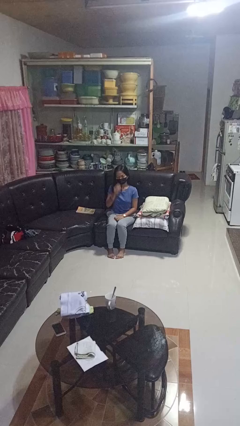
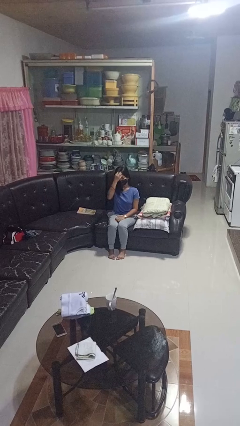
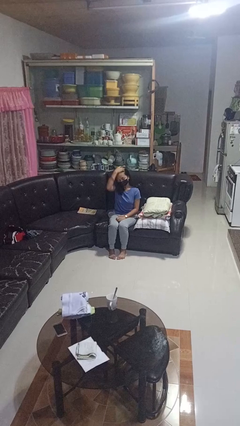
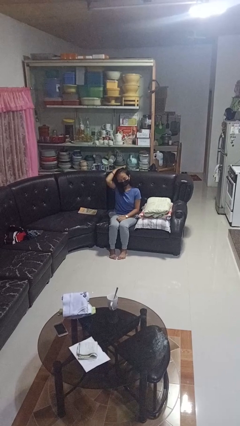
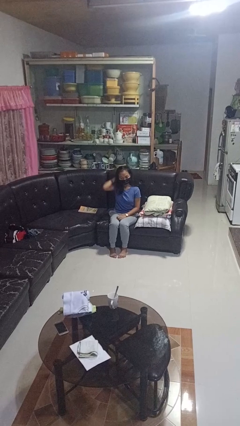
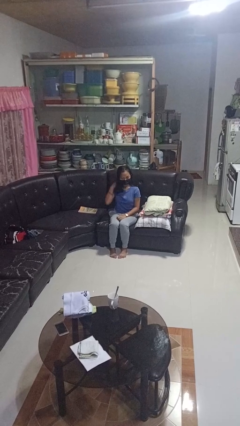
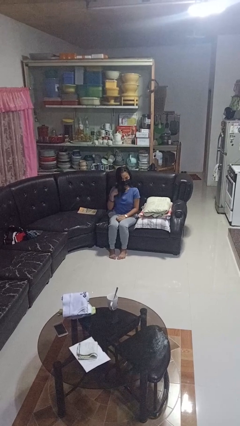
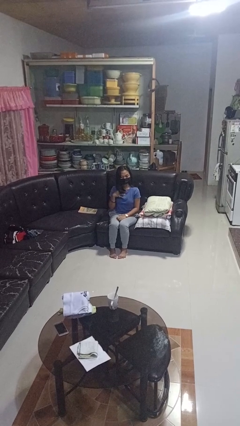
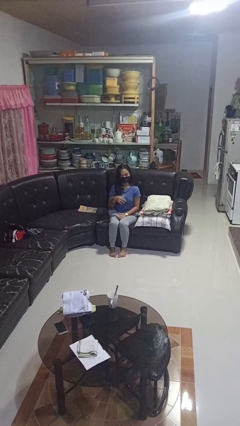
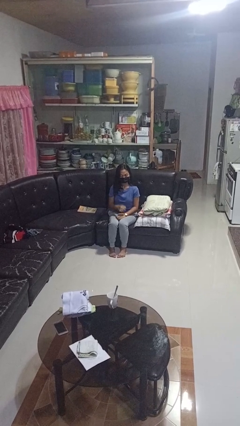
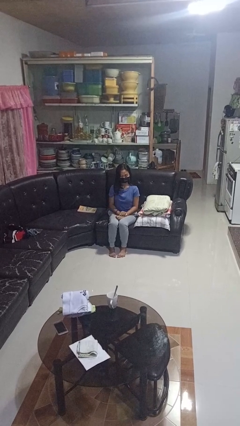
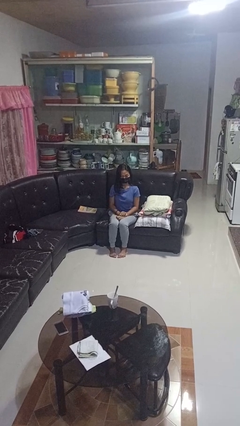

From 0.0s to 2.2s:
person strokes hair

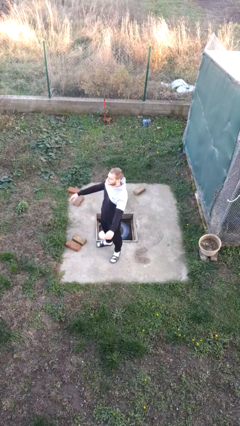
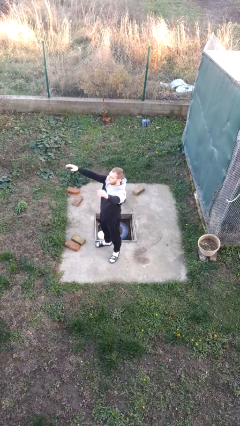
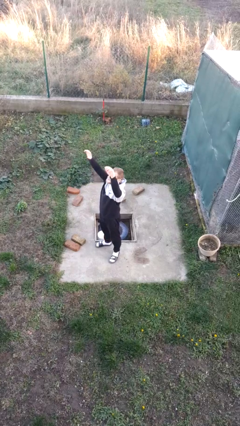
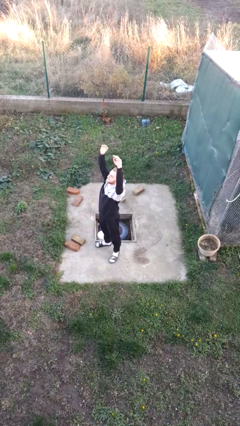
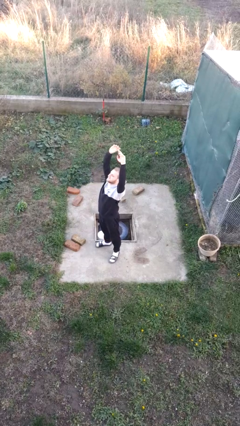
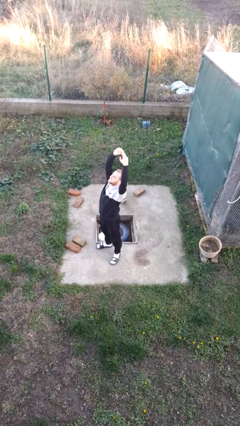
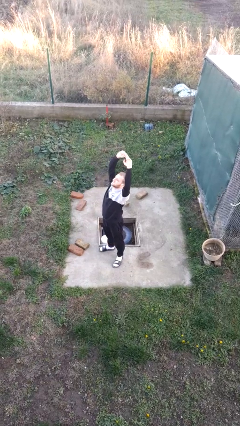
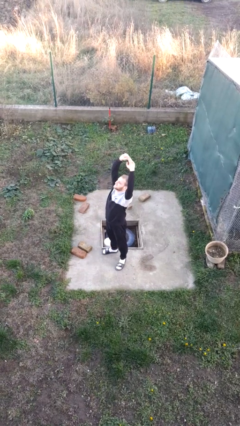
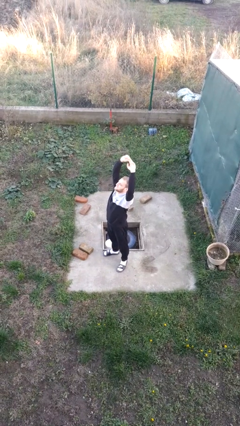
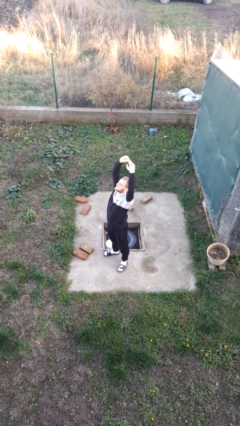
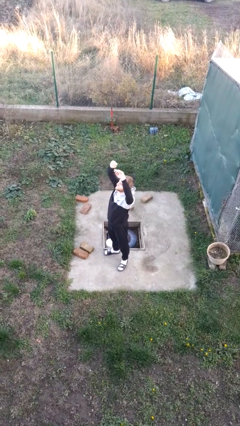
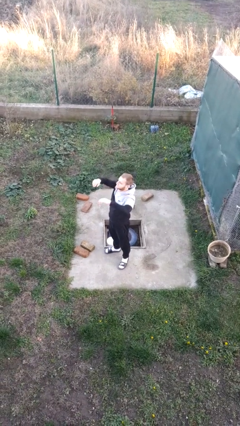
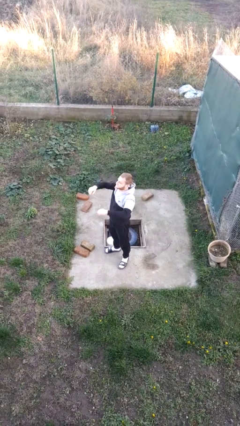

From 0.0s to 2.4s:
person stretches arms over head

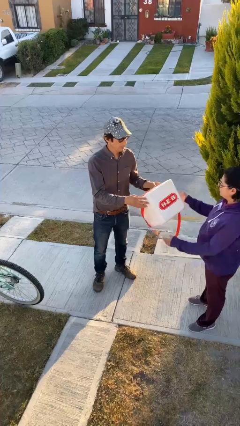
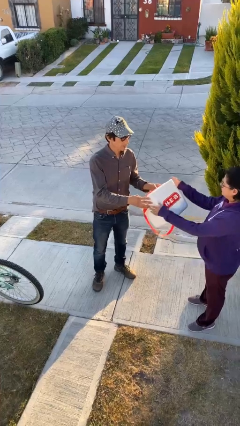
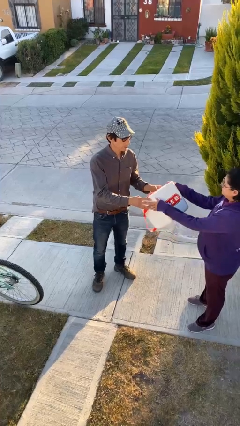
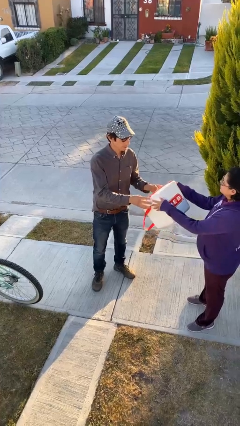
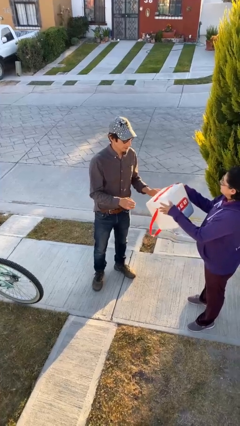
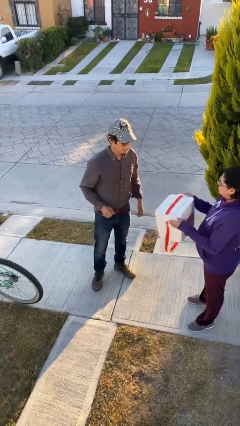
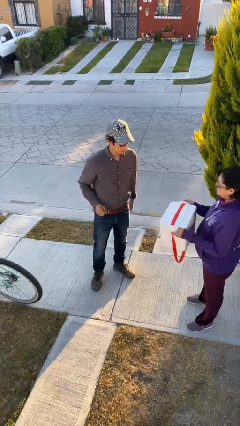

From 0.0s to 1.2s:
person transfers object to person

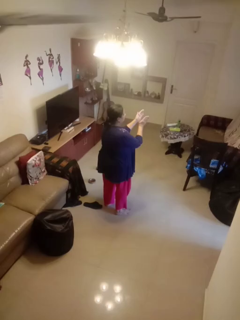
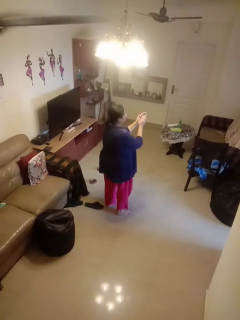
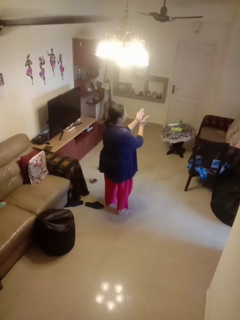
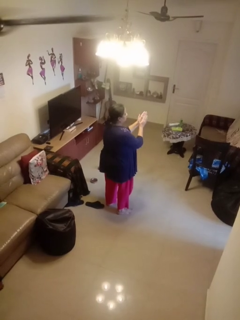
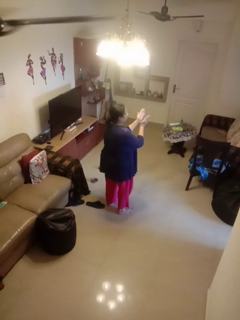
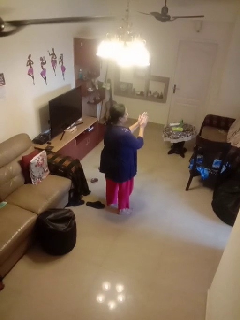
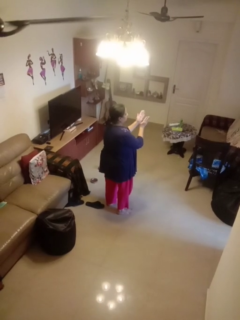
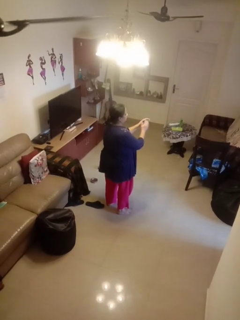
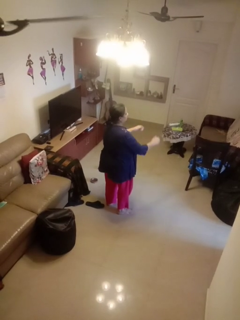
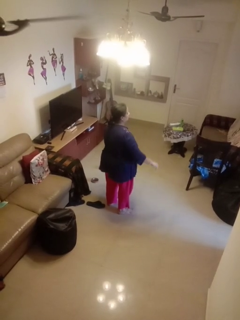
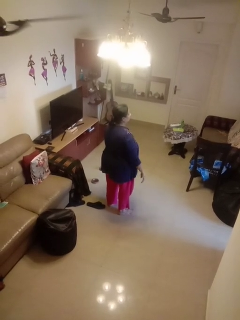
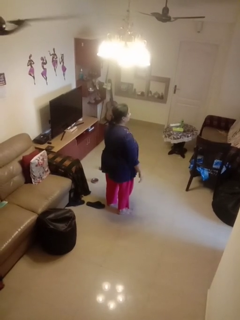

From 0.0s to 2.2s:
person claps hands

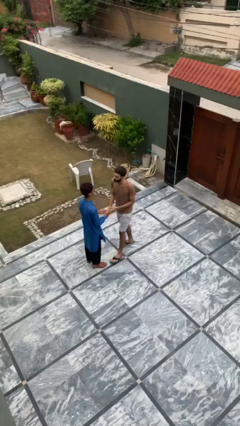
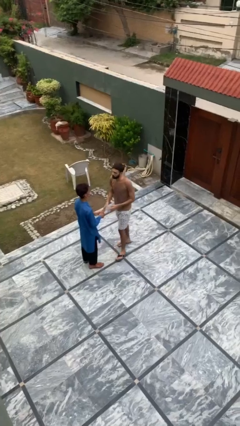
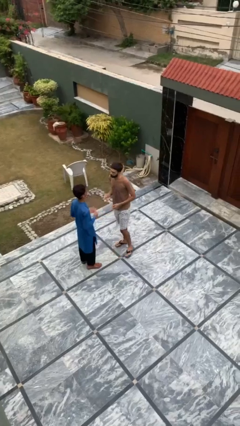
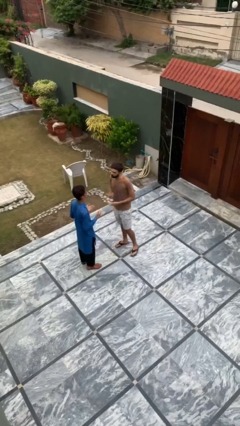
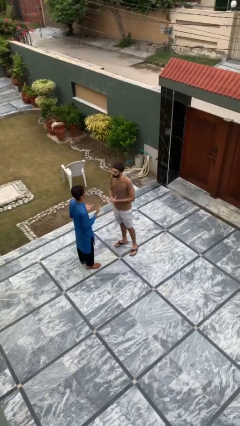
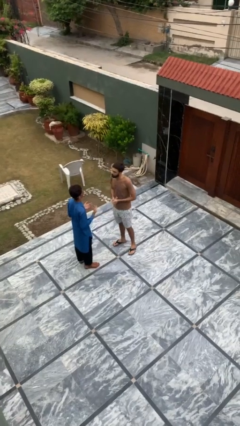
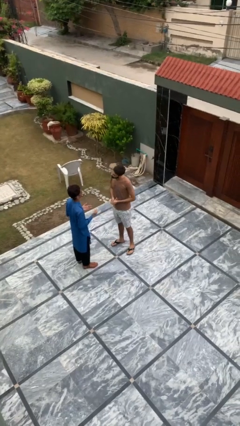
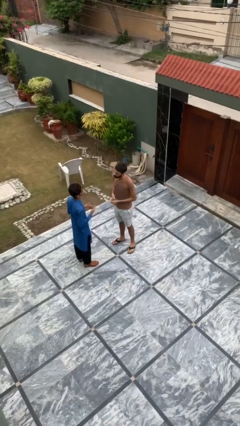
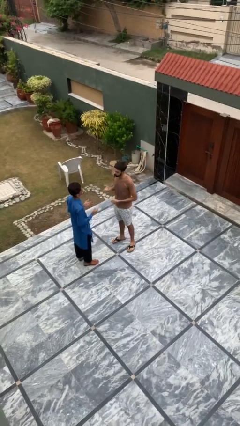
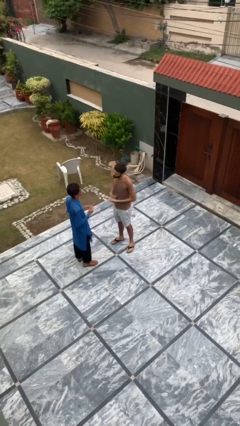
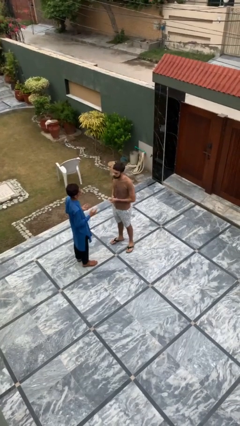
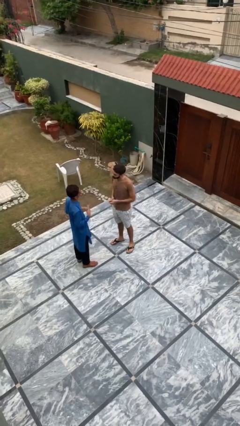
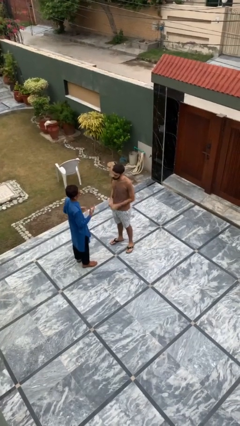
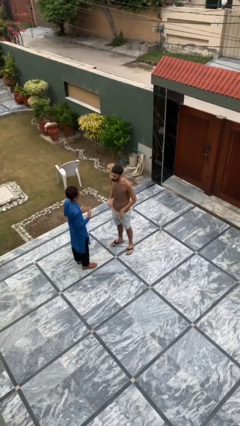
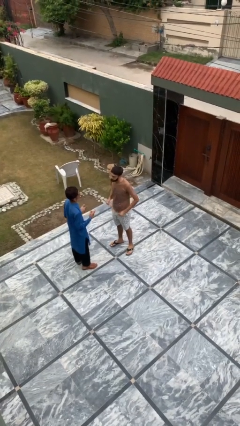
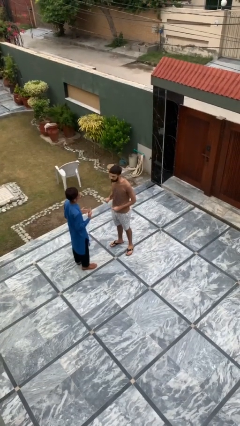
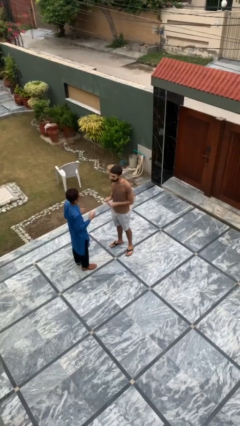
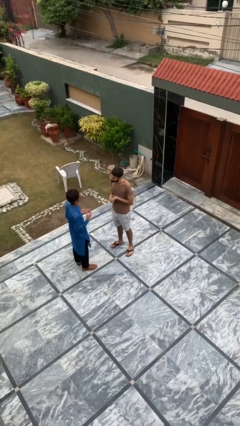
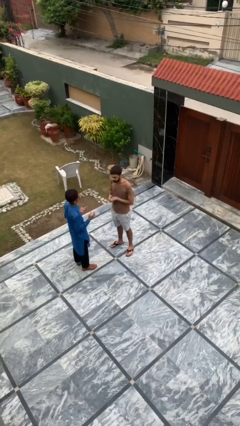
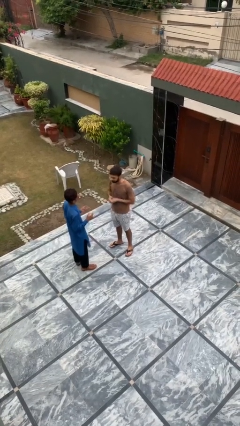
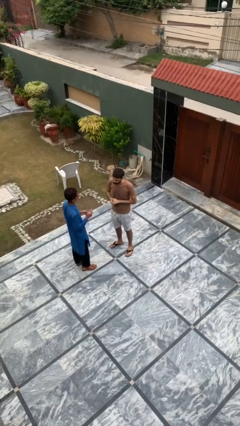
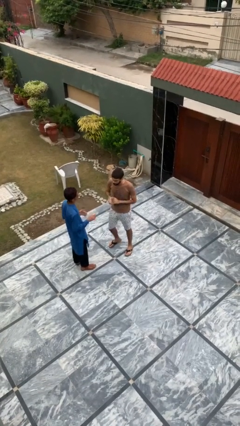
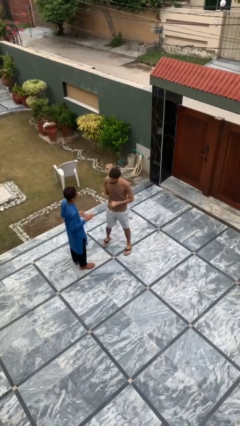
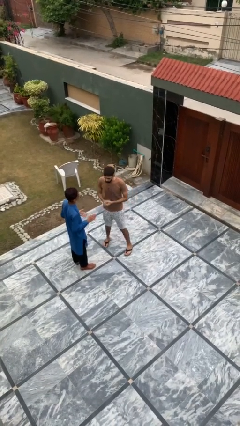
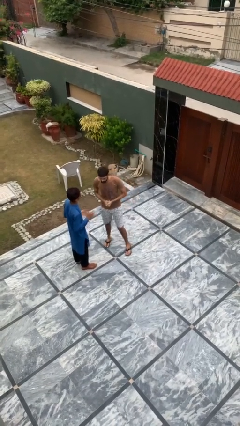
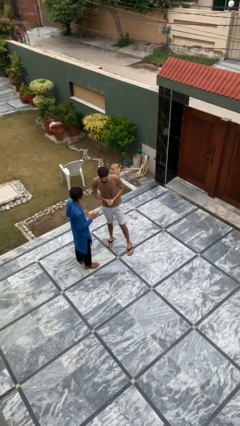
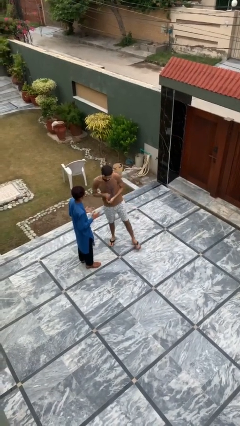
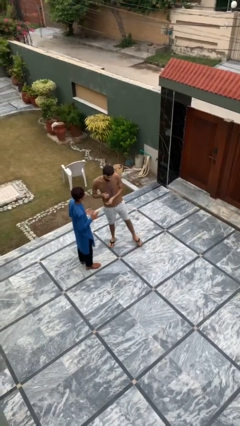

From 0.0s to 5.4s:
person talks to person

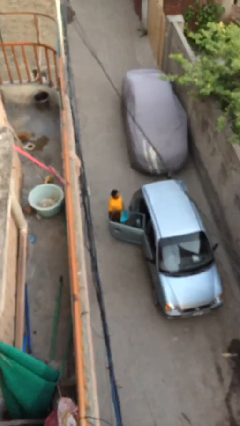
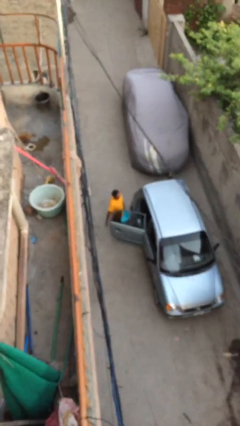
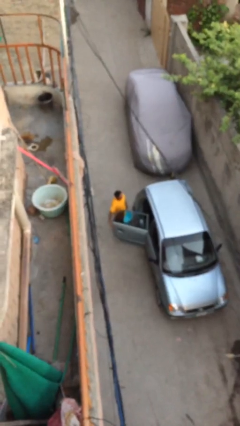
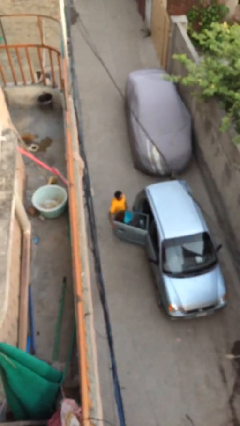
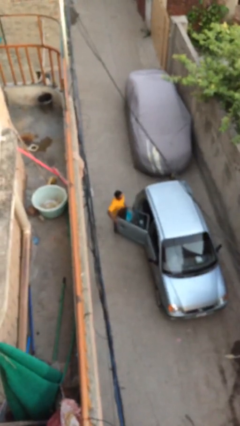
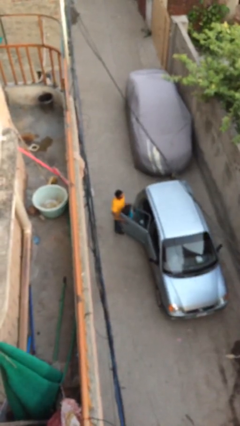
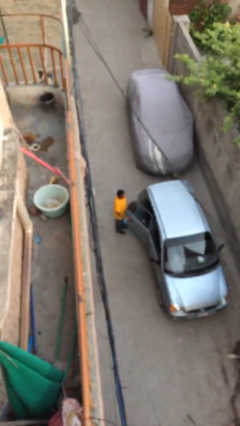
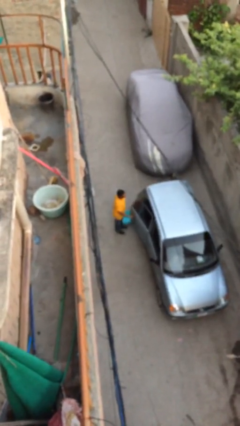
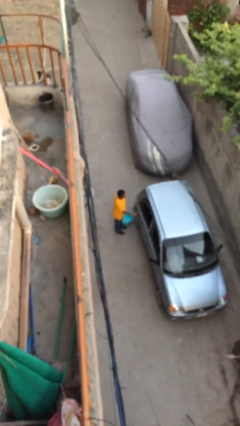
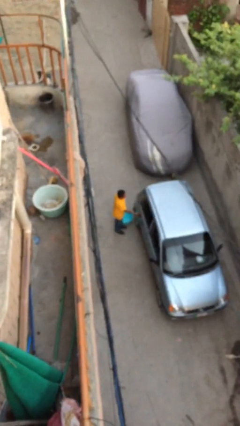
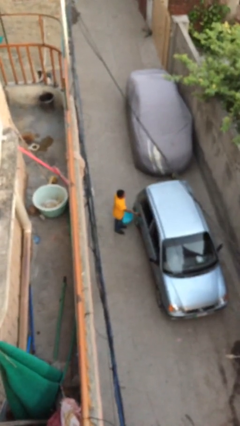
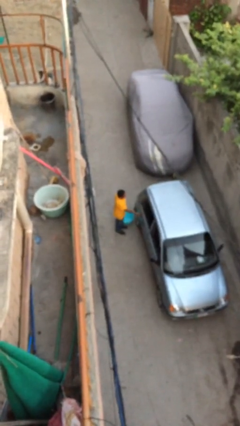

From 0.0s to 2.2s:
person closes car door

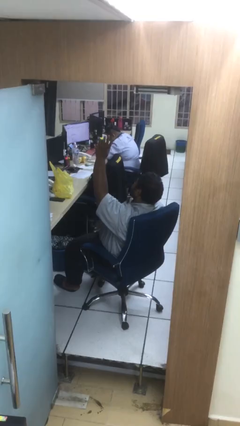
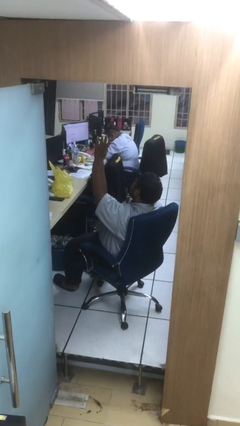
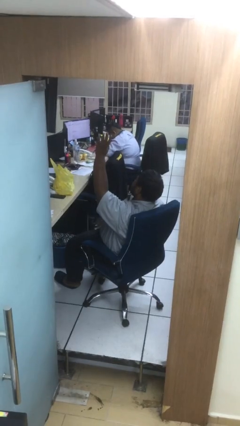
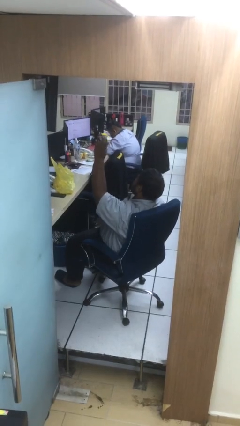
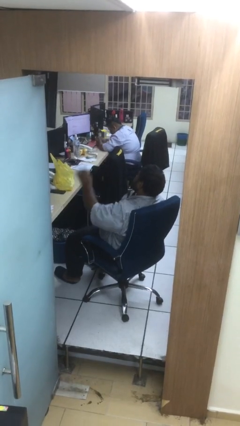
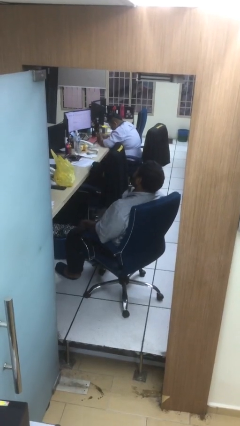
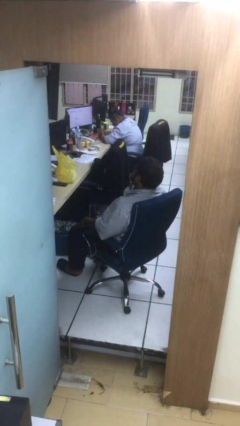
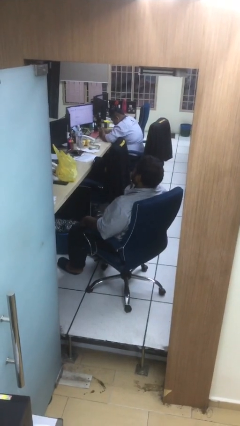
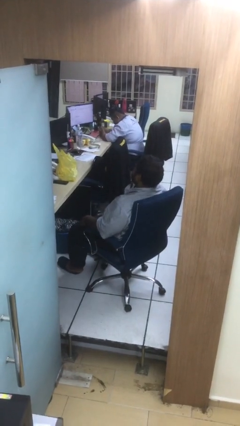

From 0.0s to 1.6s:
person gestures lower hand

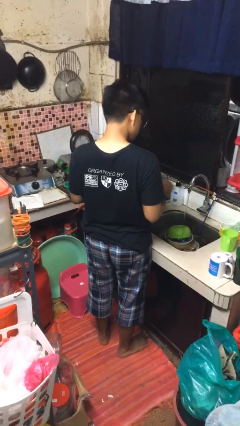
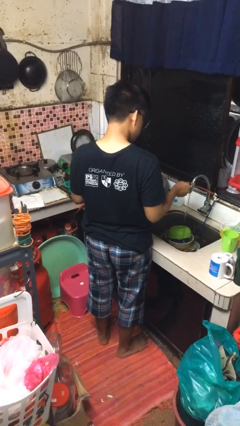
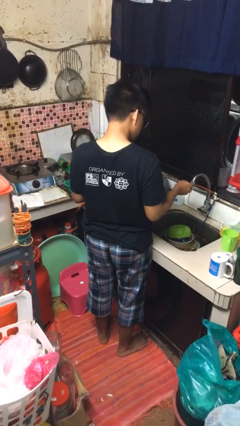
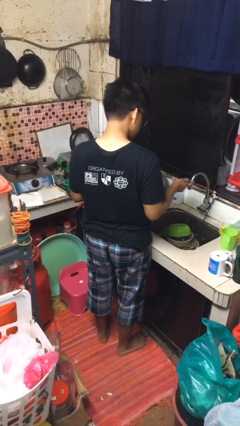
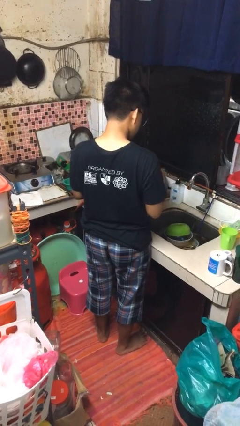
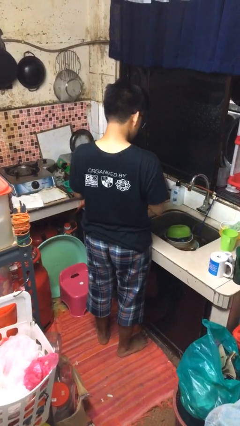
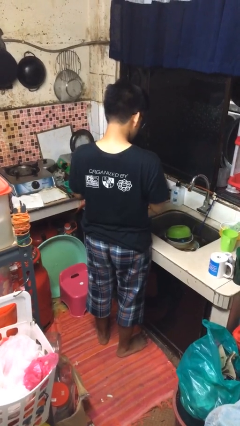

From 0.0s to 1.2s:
person turns off faucet
